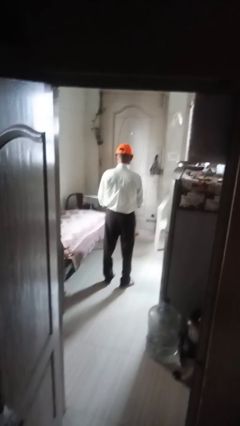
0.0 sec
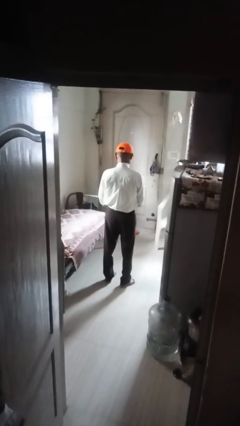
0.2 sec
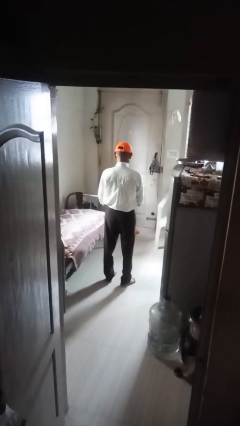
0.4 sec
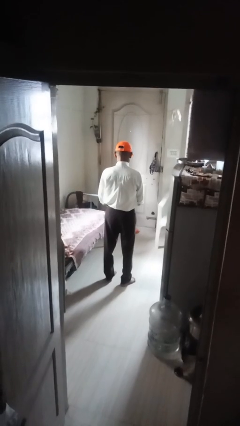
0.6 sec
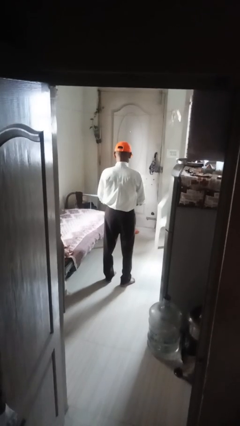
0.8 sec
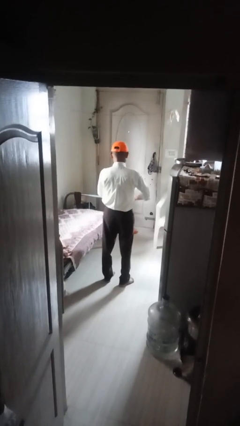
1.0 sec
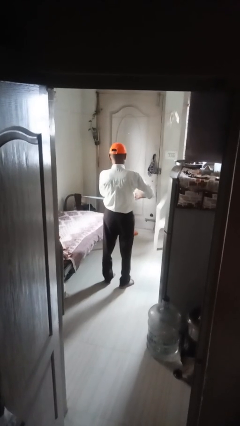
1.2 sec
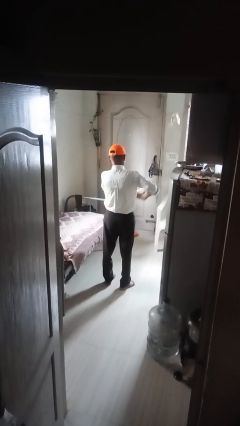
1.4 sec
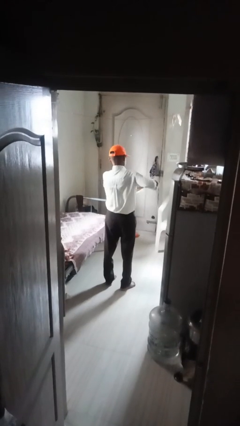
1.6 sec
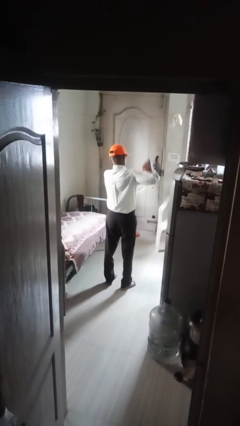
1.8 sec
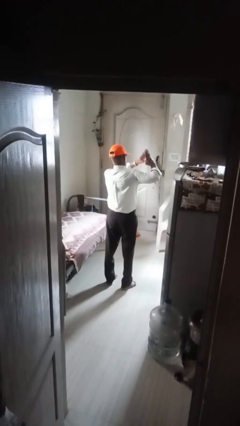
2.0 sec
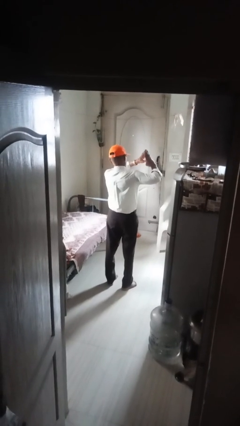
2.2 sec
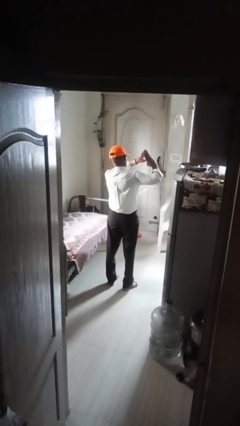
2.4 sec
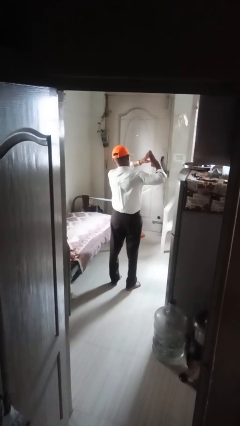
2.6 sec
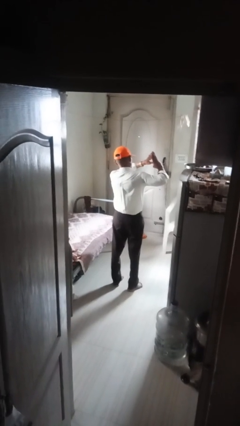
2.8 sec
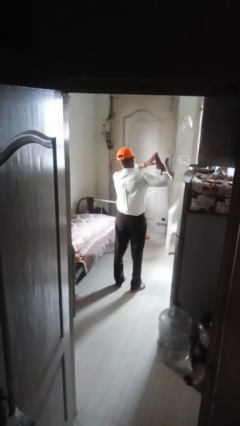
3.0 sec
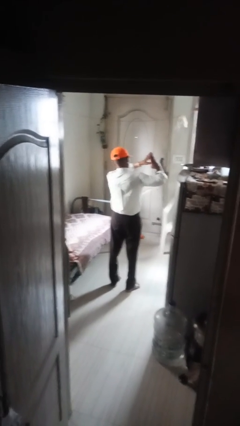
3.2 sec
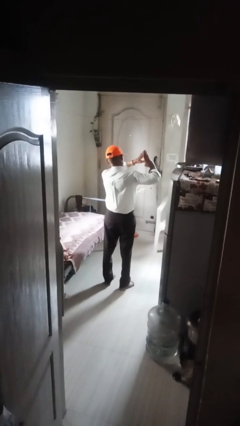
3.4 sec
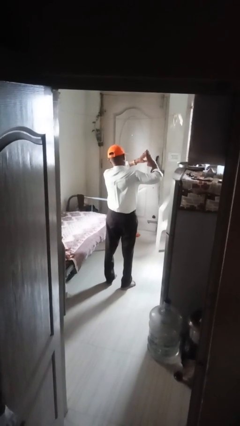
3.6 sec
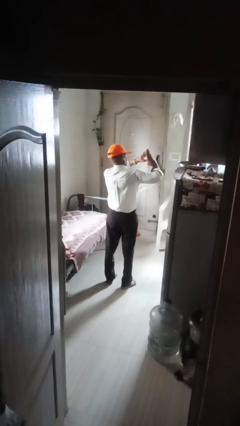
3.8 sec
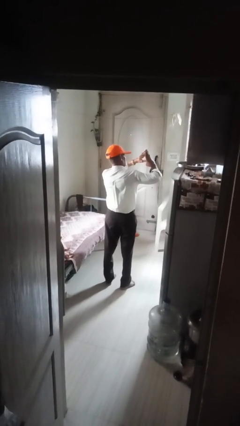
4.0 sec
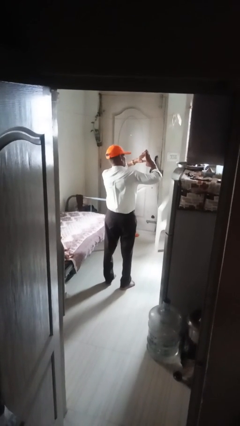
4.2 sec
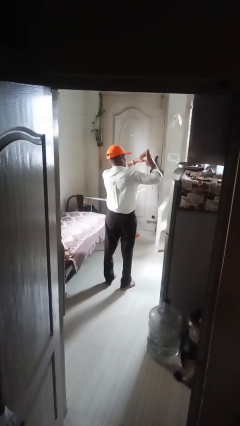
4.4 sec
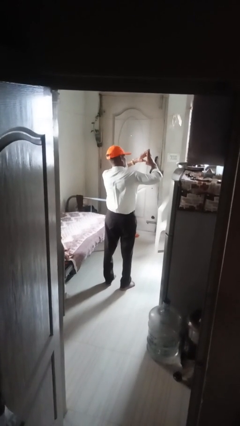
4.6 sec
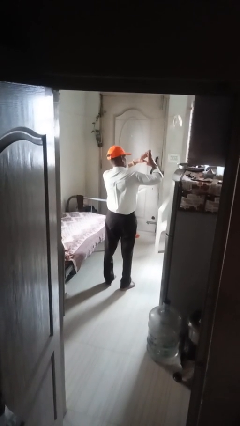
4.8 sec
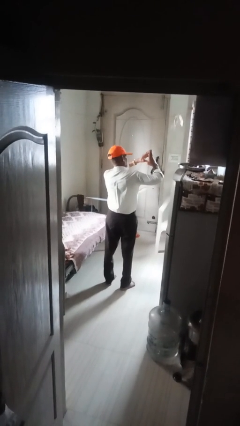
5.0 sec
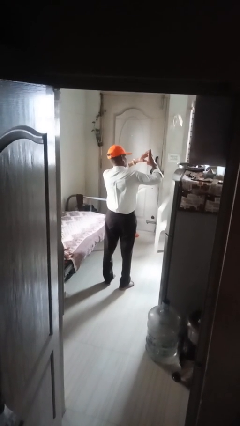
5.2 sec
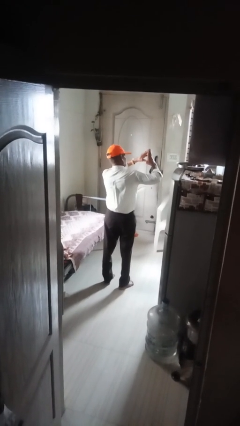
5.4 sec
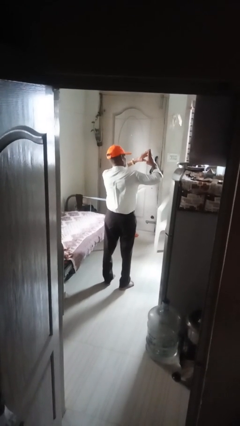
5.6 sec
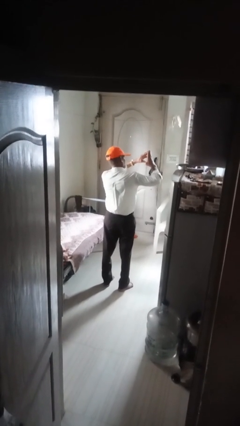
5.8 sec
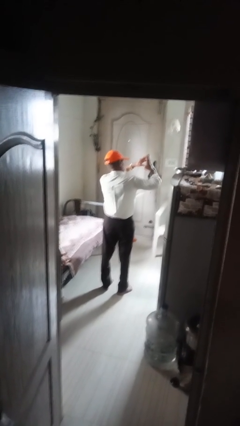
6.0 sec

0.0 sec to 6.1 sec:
person gestures heart

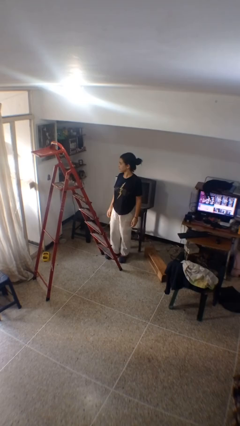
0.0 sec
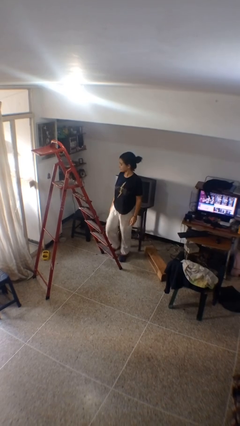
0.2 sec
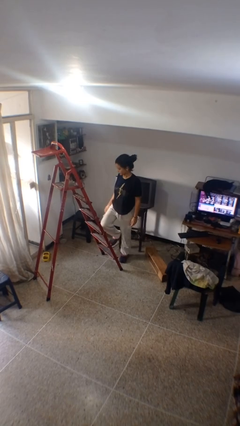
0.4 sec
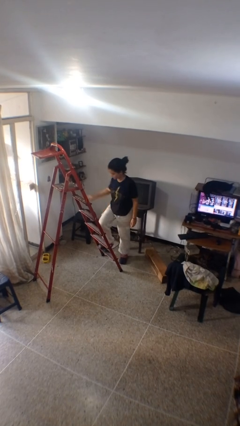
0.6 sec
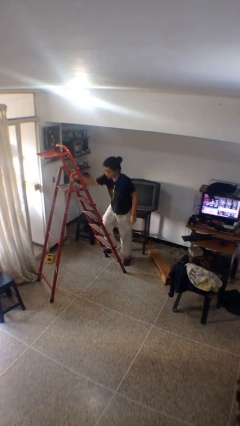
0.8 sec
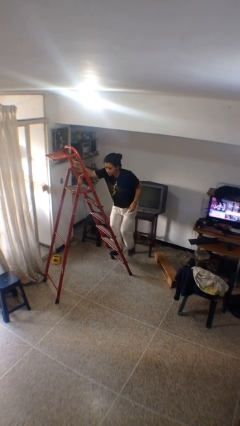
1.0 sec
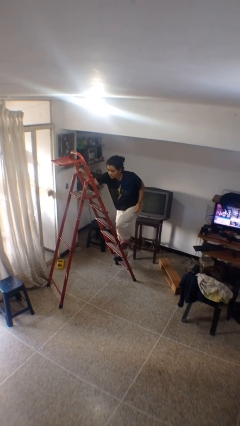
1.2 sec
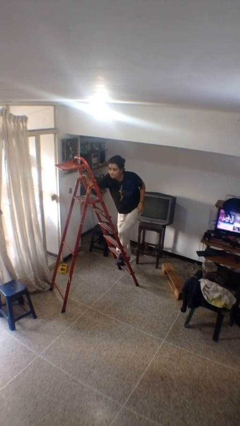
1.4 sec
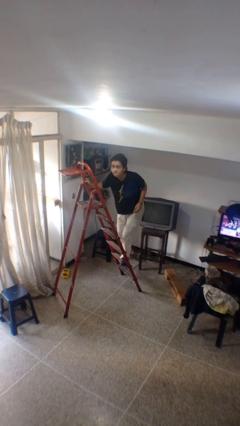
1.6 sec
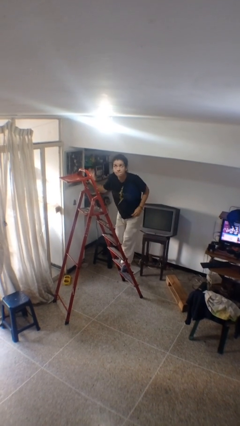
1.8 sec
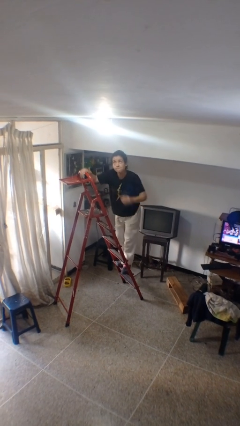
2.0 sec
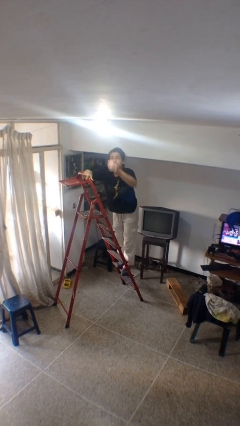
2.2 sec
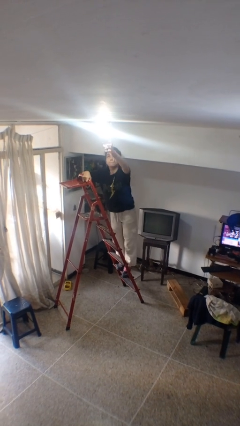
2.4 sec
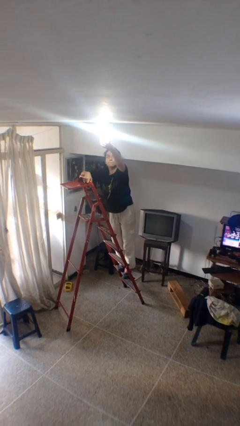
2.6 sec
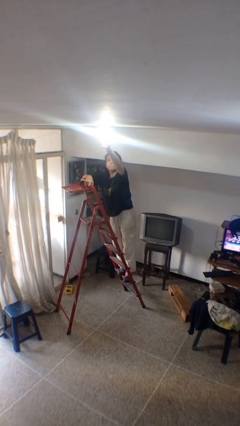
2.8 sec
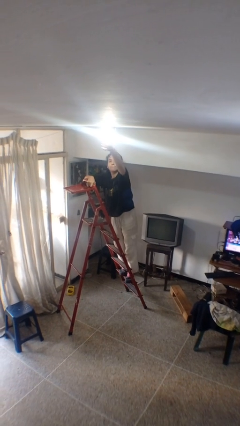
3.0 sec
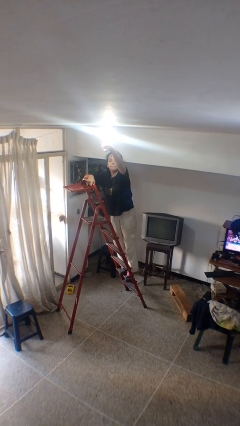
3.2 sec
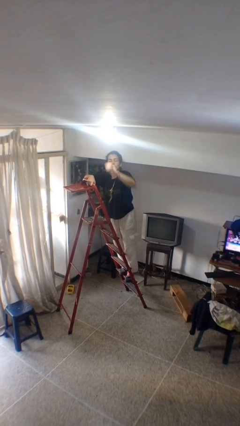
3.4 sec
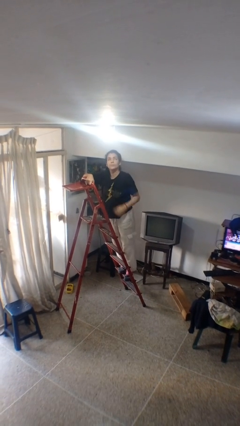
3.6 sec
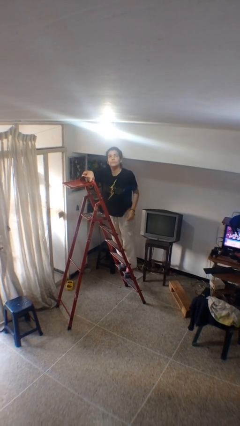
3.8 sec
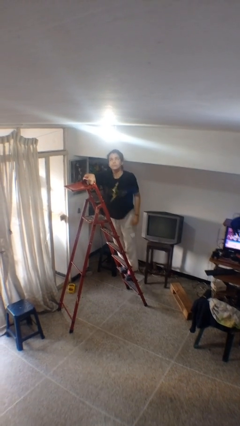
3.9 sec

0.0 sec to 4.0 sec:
person climbs up ladder

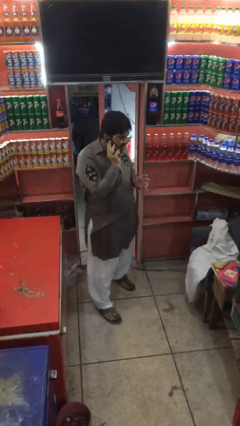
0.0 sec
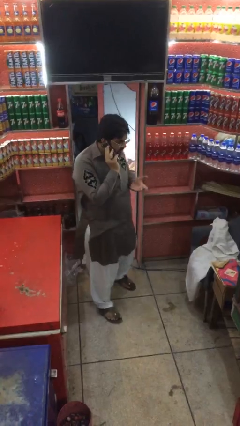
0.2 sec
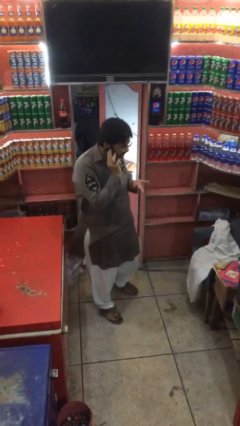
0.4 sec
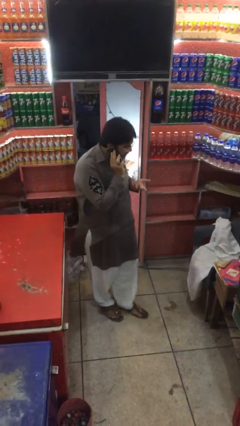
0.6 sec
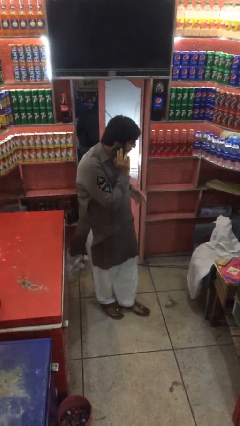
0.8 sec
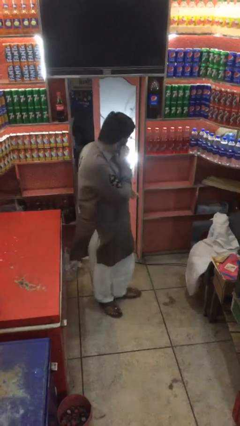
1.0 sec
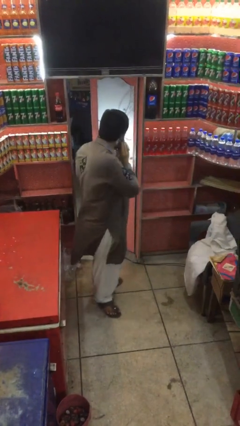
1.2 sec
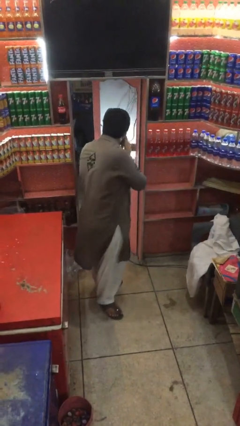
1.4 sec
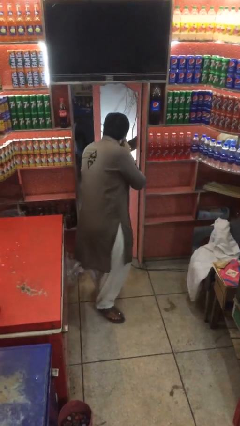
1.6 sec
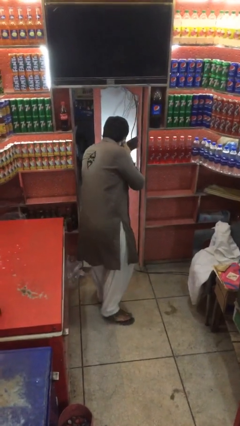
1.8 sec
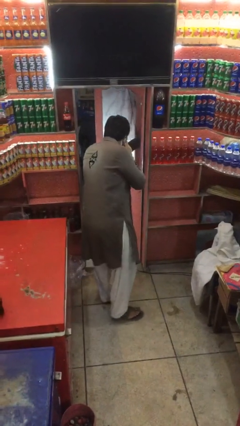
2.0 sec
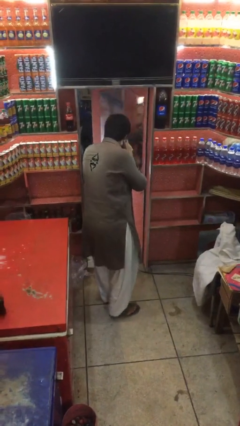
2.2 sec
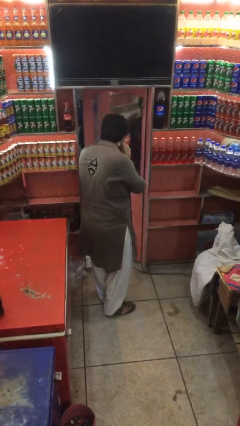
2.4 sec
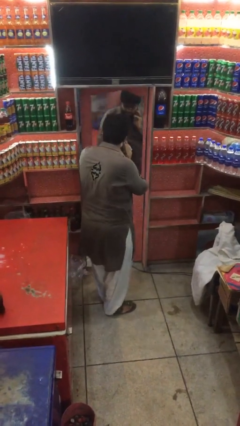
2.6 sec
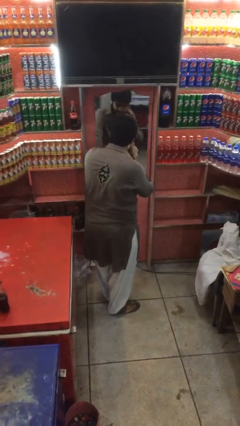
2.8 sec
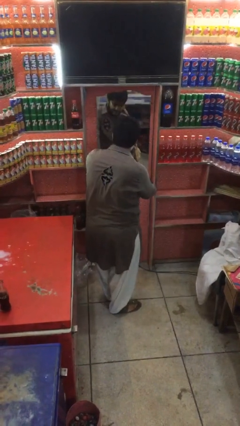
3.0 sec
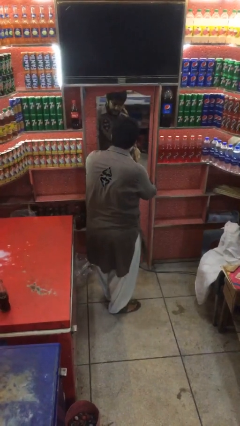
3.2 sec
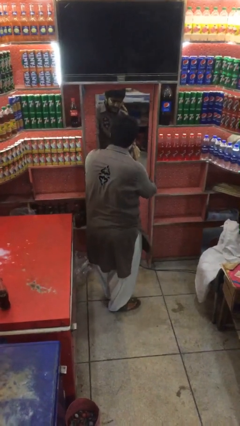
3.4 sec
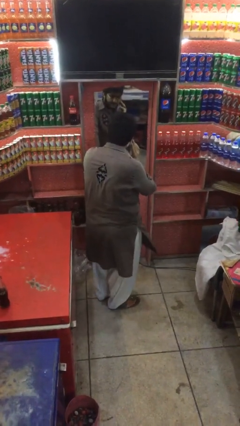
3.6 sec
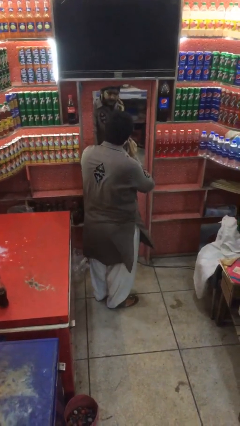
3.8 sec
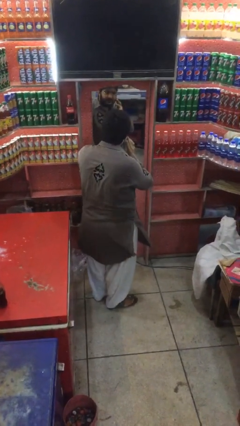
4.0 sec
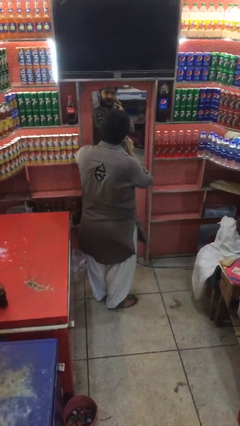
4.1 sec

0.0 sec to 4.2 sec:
person closes facility door

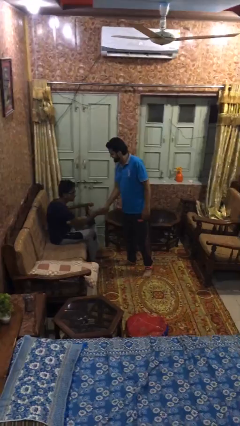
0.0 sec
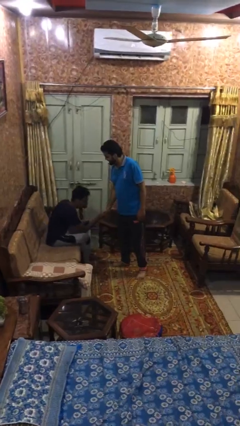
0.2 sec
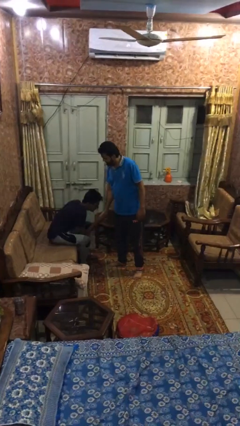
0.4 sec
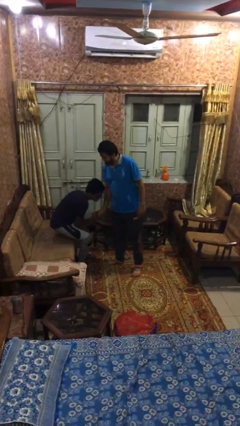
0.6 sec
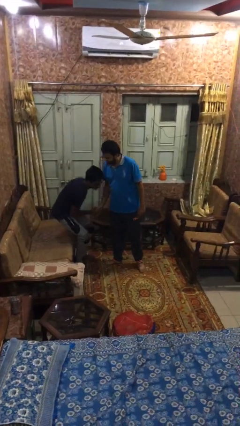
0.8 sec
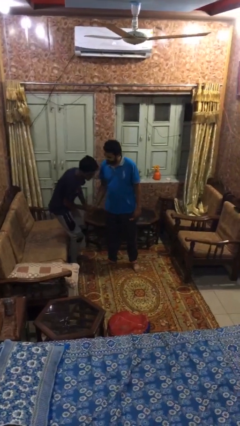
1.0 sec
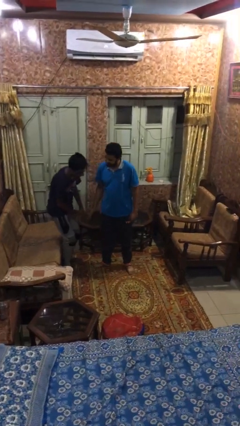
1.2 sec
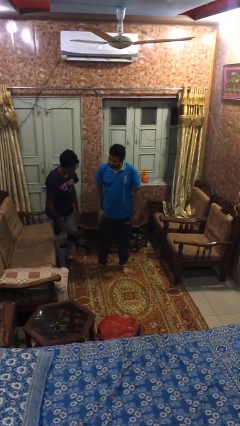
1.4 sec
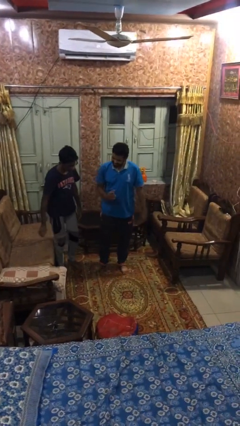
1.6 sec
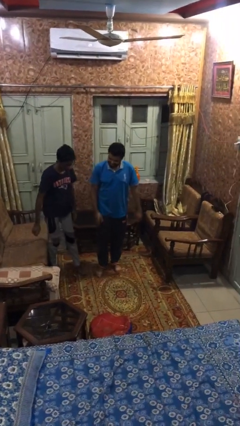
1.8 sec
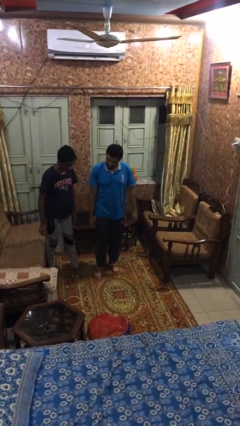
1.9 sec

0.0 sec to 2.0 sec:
person shakes hand

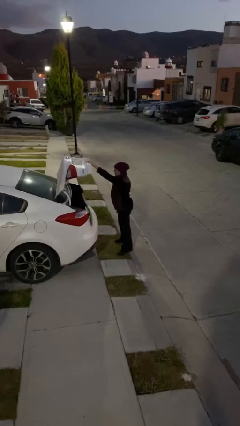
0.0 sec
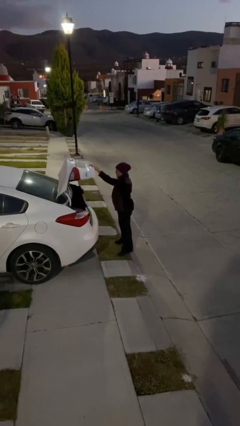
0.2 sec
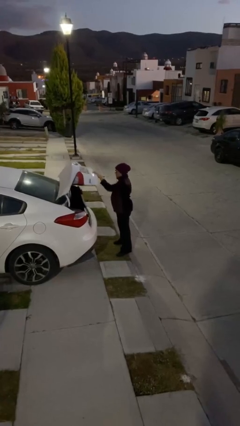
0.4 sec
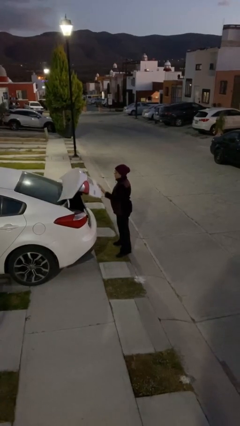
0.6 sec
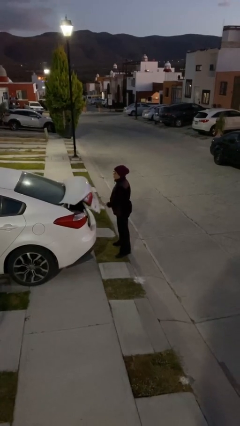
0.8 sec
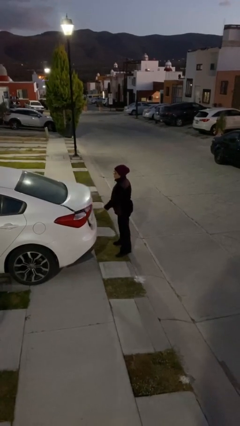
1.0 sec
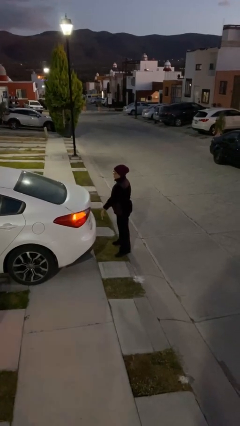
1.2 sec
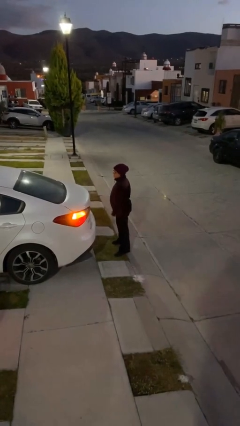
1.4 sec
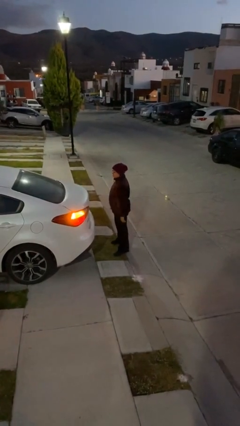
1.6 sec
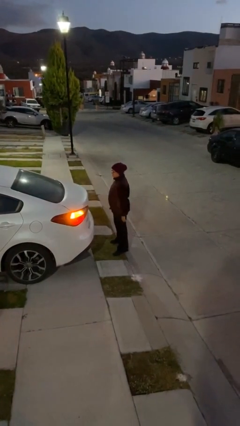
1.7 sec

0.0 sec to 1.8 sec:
person closes car trunk
